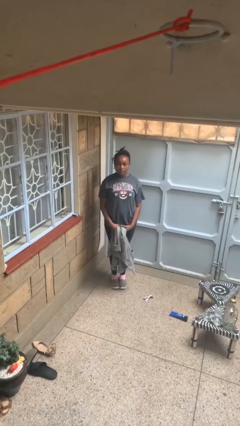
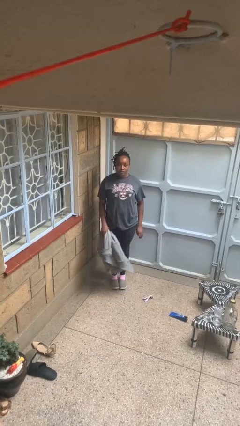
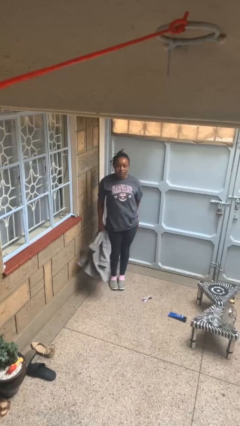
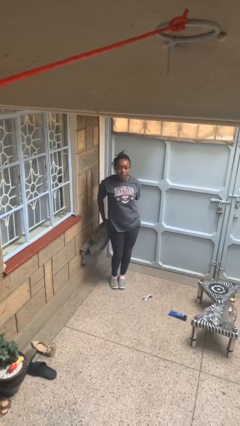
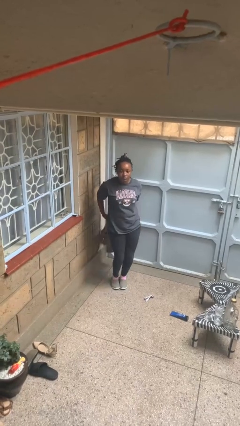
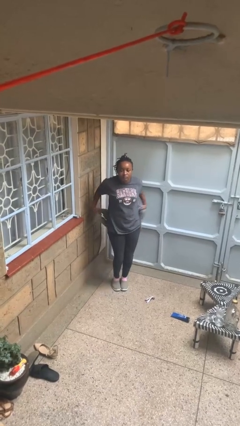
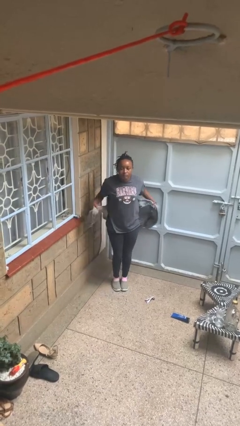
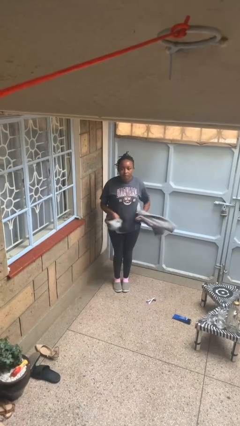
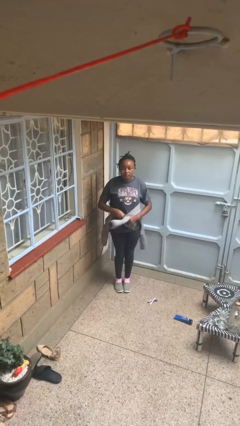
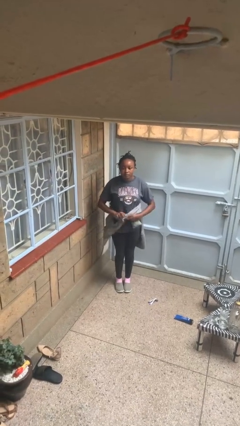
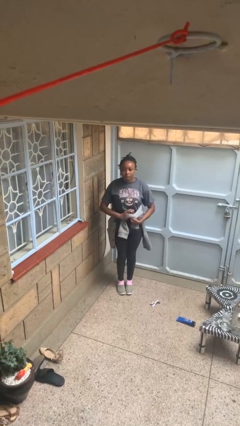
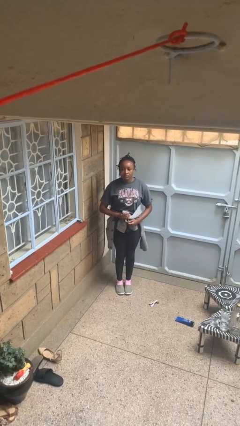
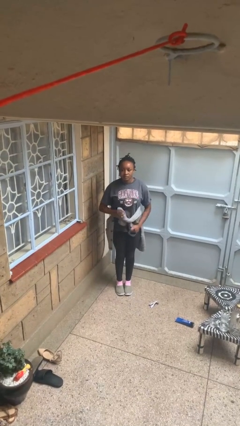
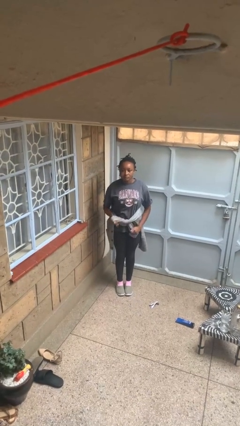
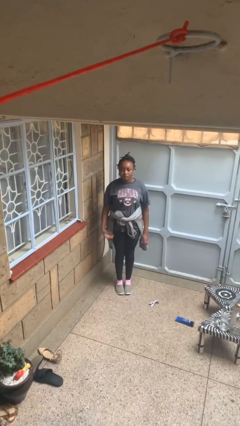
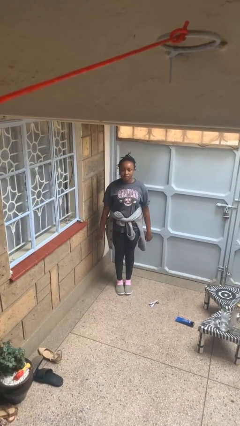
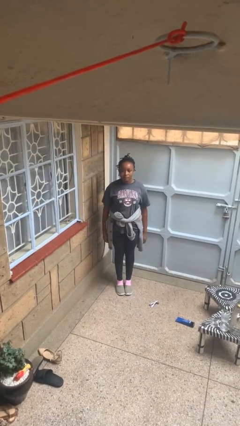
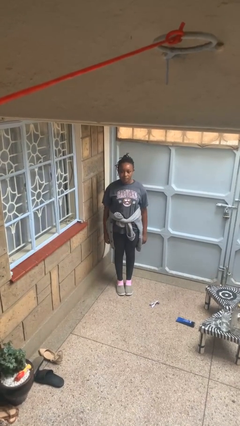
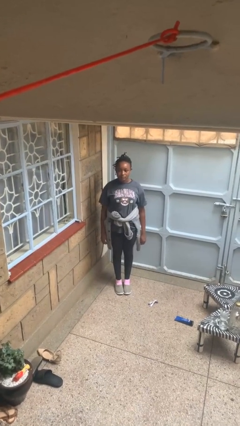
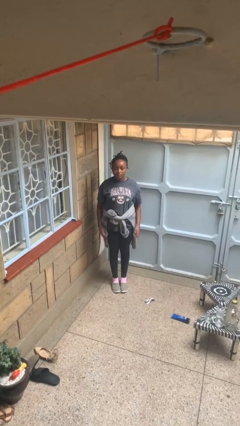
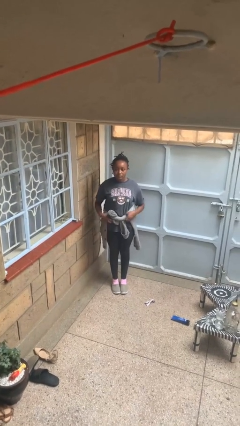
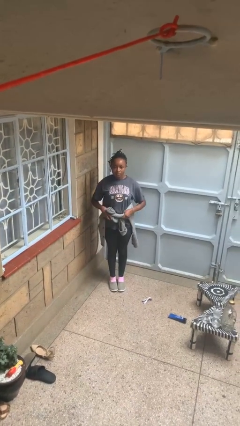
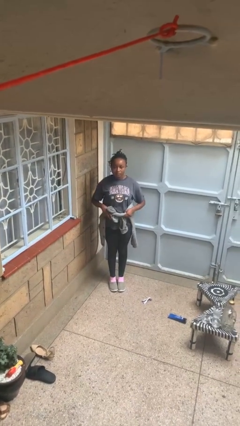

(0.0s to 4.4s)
person ties jacket around waist

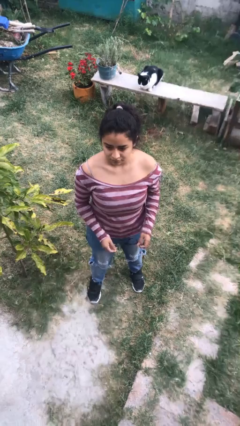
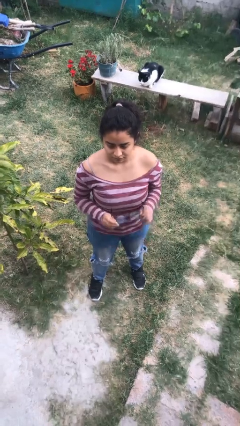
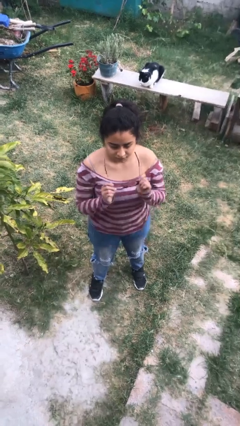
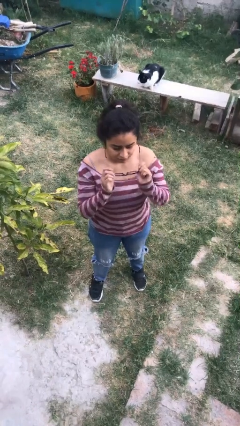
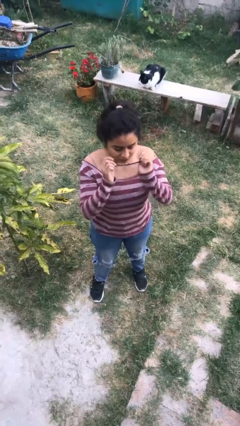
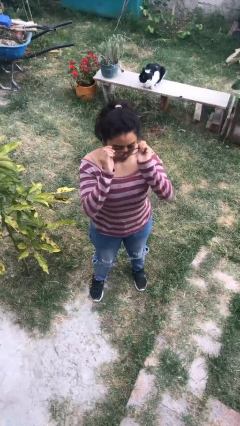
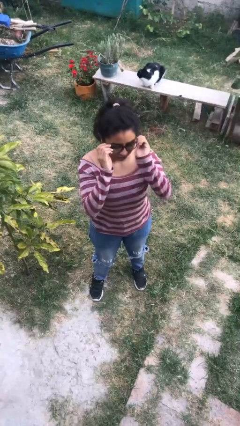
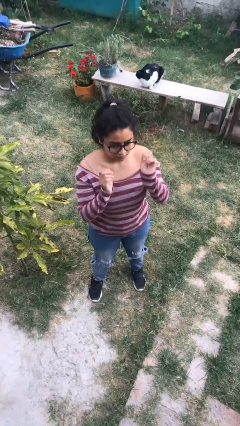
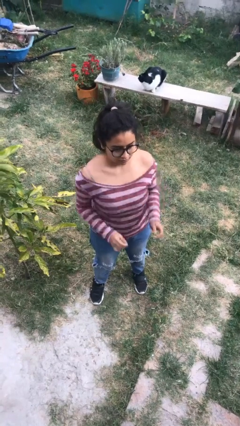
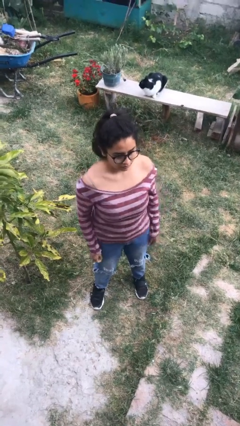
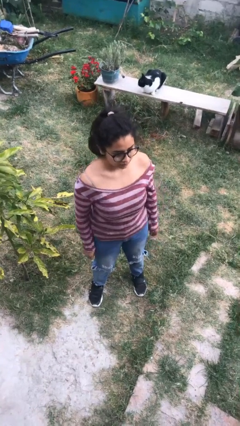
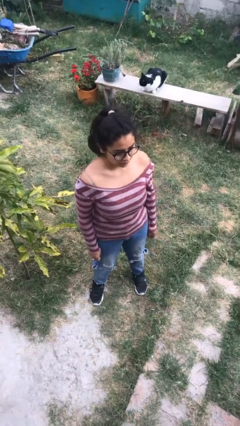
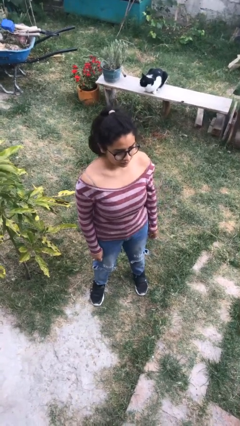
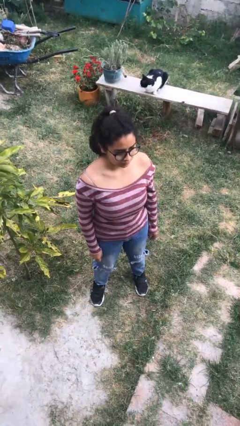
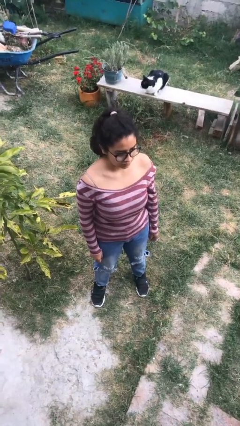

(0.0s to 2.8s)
person puts on glasses

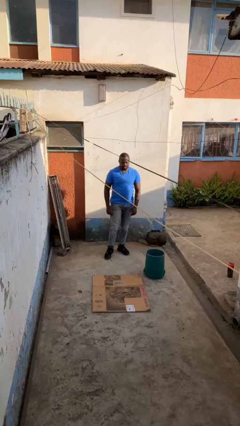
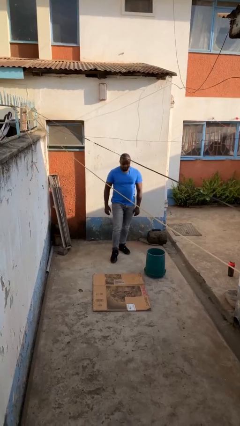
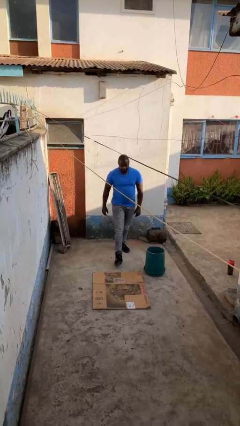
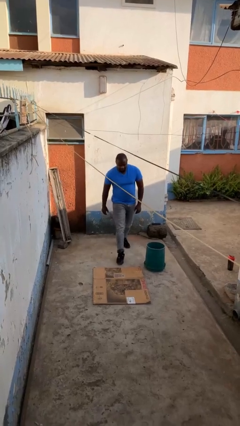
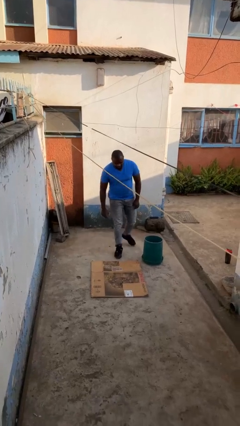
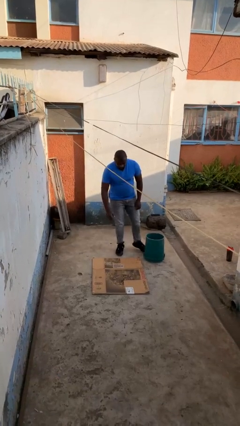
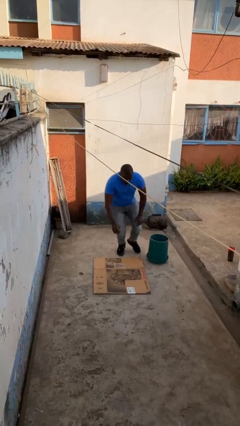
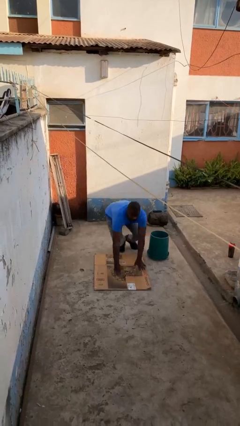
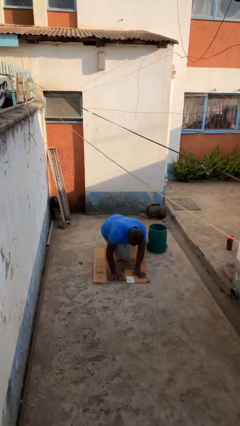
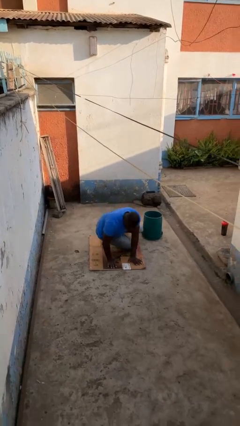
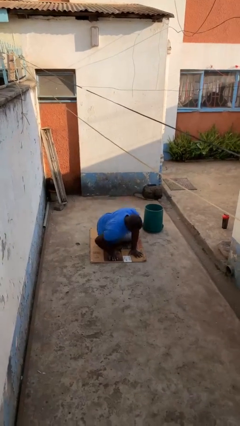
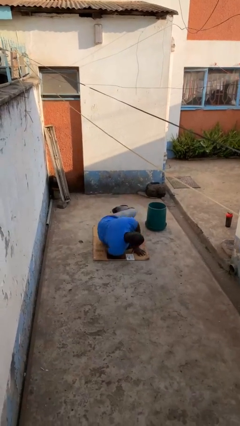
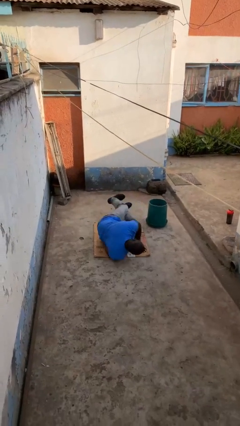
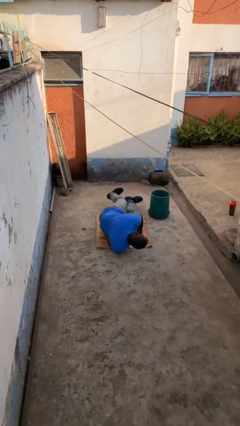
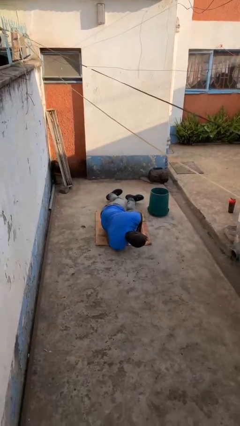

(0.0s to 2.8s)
person trips on object on floor

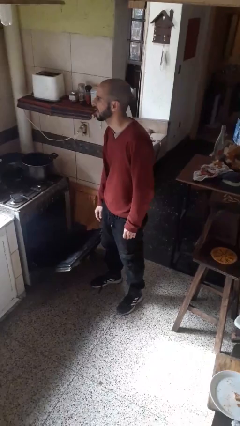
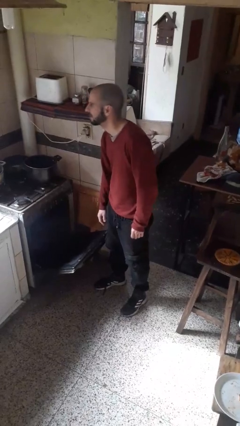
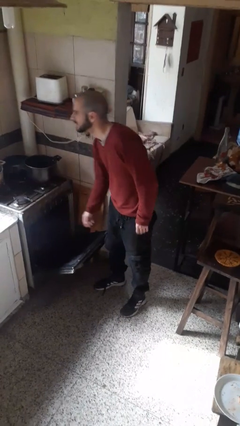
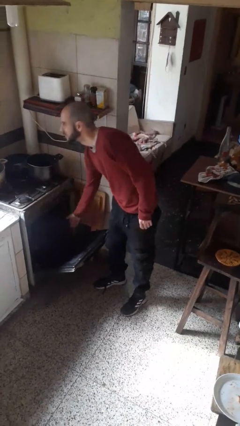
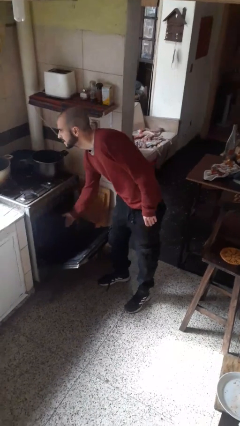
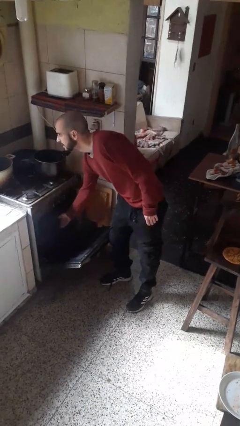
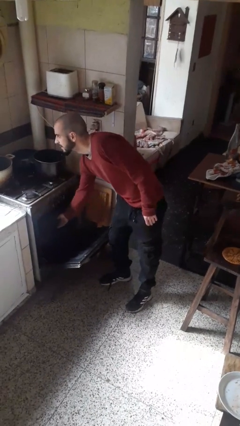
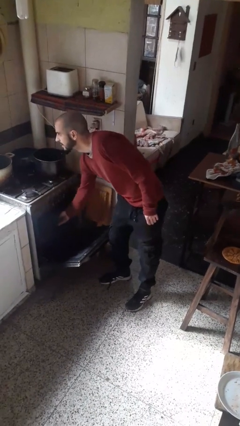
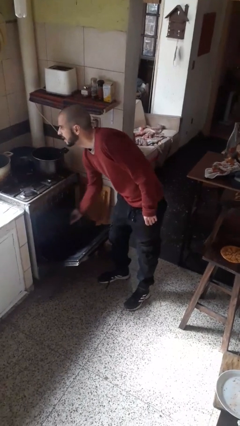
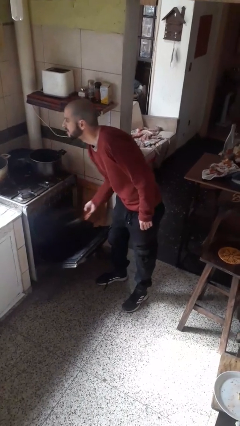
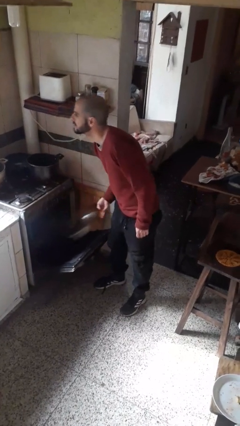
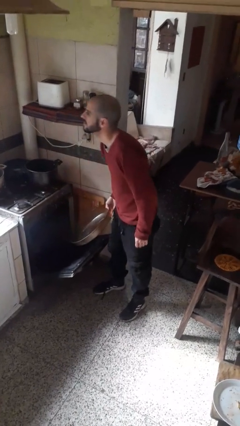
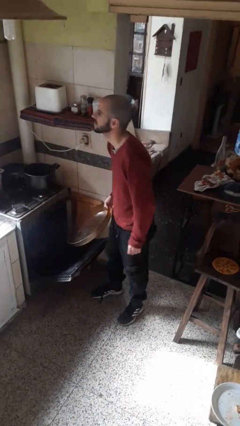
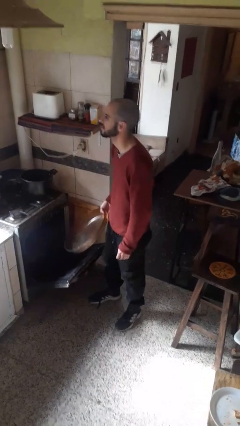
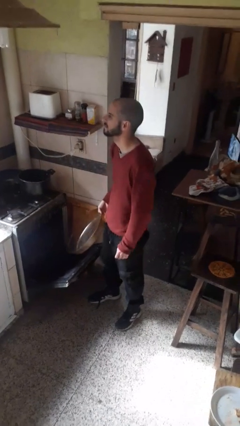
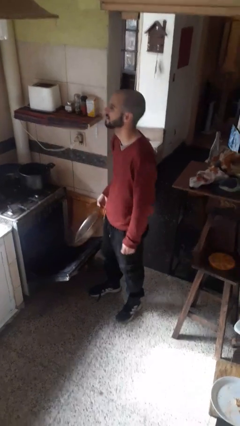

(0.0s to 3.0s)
person takes object from oven

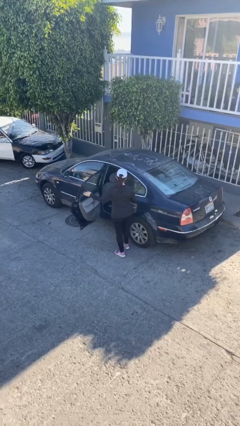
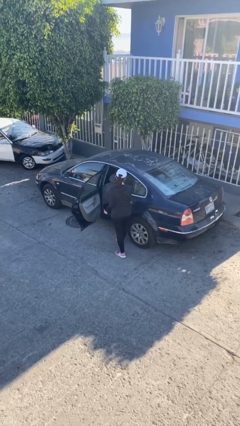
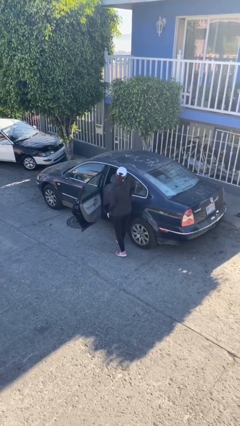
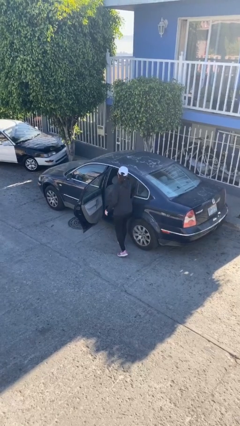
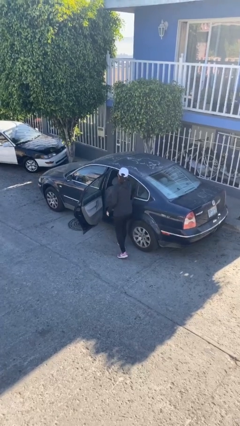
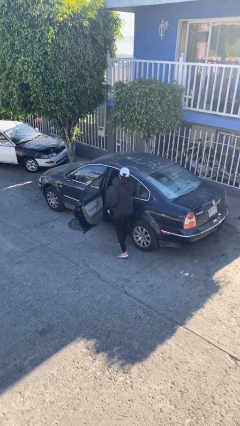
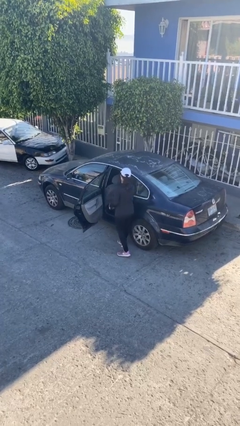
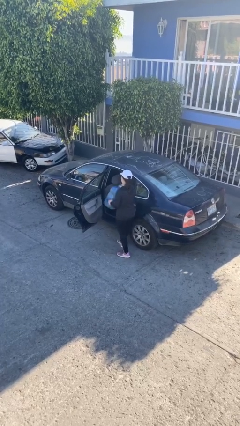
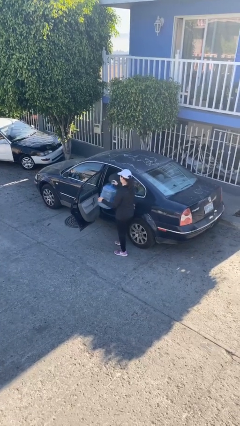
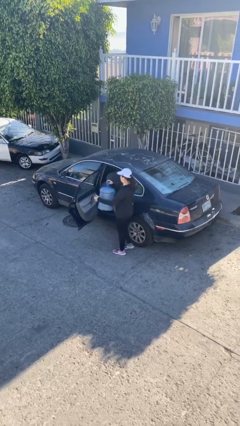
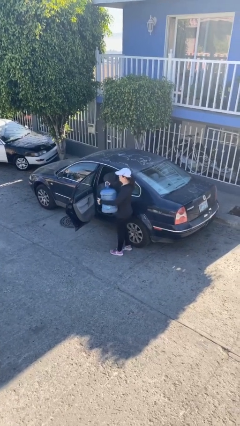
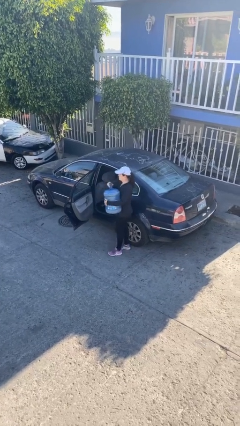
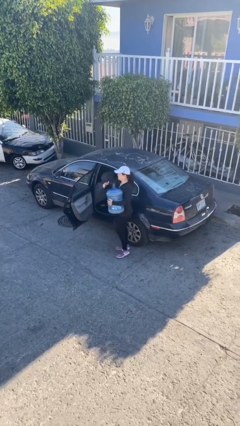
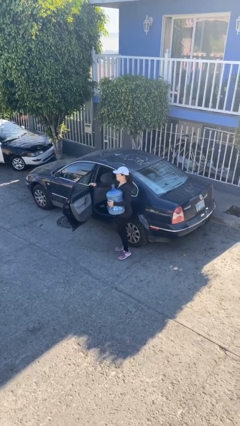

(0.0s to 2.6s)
person unloads car

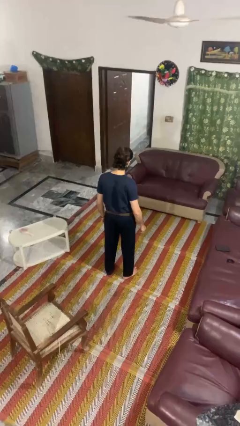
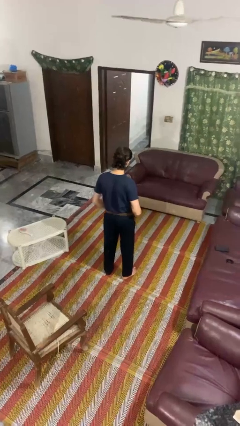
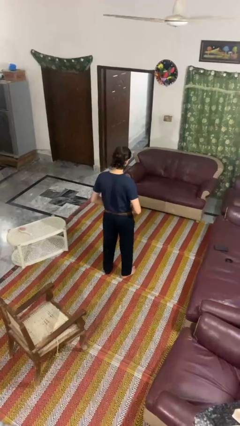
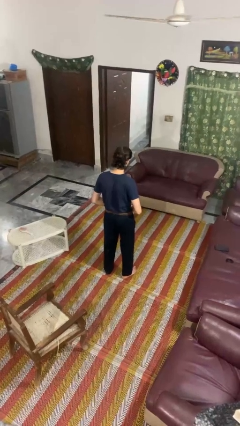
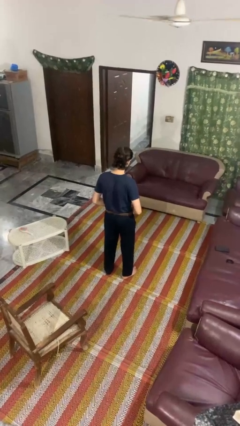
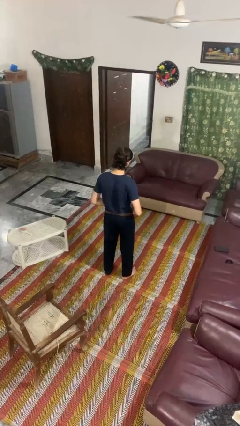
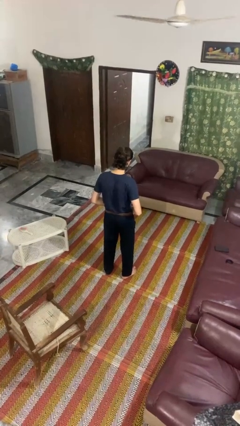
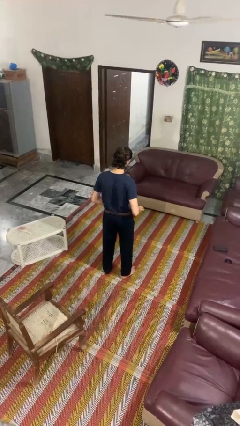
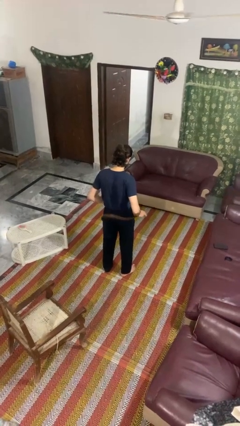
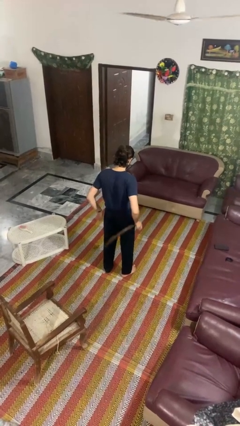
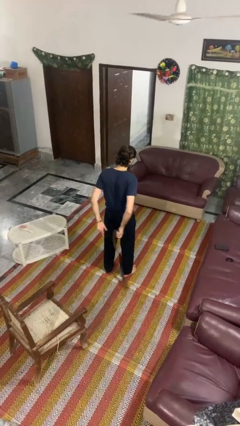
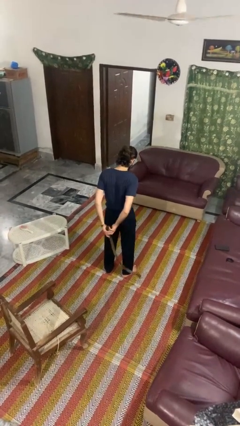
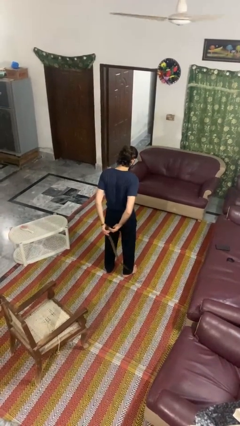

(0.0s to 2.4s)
person takes off belt
